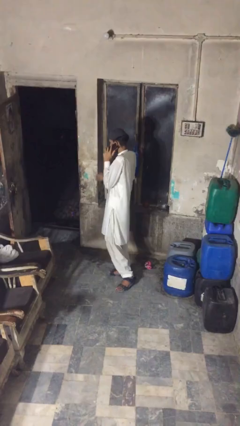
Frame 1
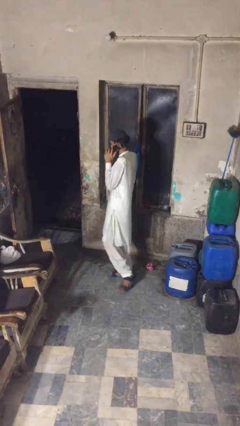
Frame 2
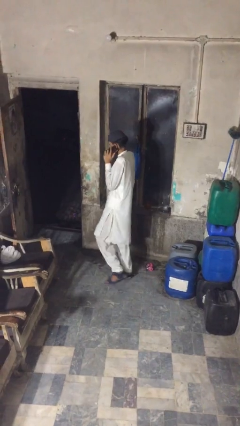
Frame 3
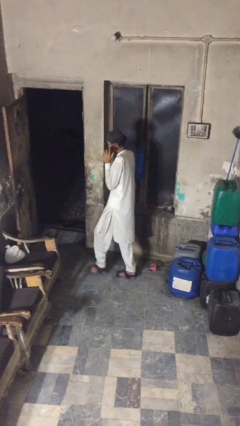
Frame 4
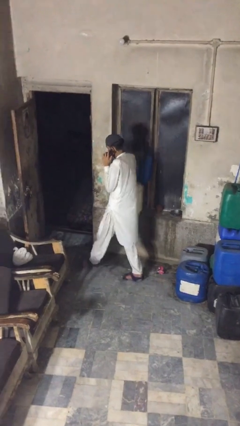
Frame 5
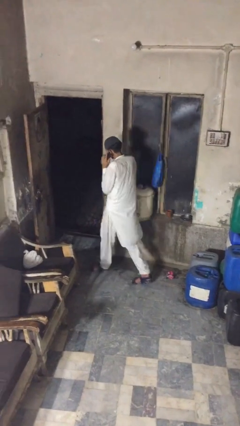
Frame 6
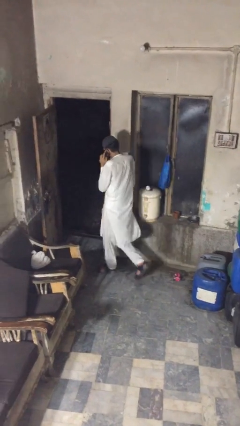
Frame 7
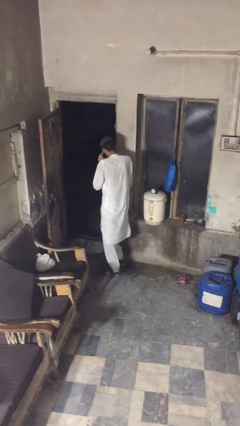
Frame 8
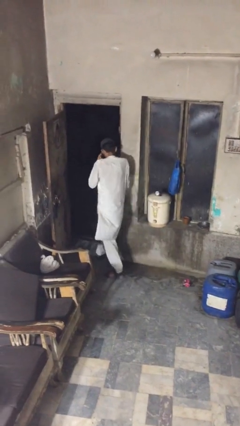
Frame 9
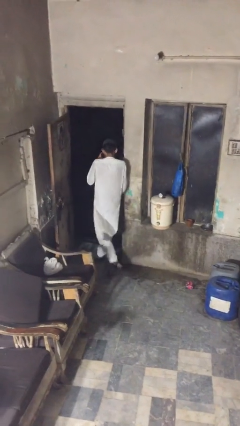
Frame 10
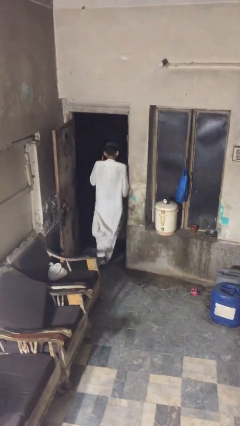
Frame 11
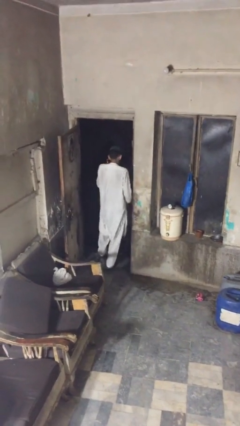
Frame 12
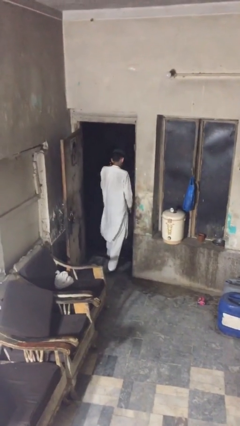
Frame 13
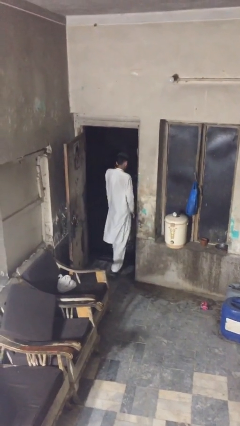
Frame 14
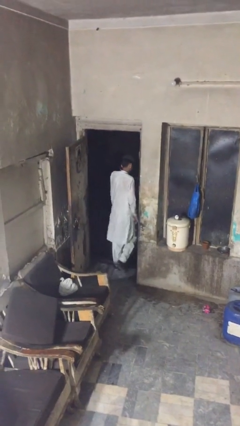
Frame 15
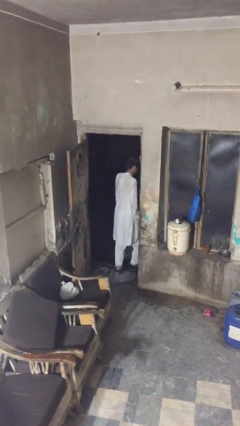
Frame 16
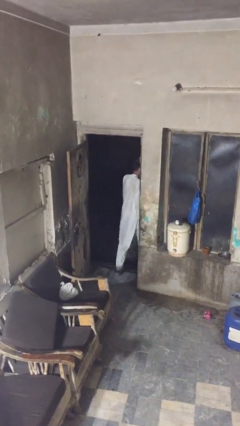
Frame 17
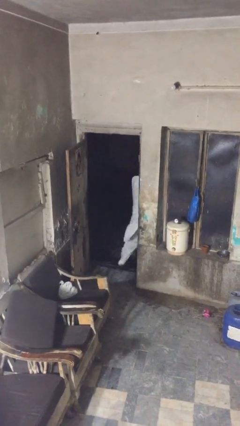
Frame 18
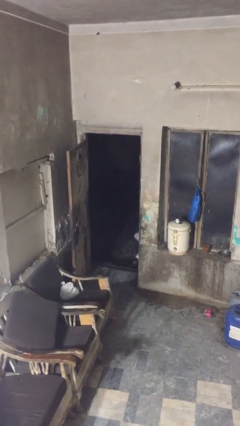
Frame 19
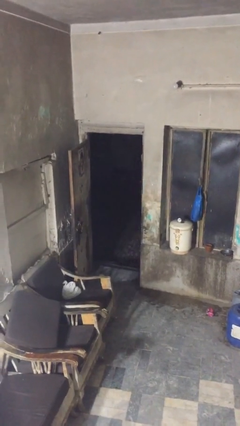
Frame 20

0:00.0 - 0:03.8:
person exits scene through structure

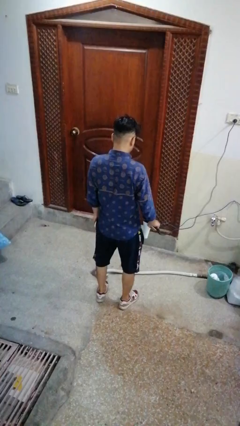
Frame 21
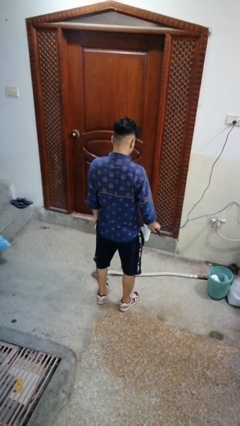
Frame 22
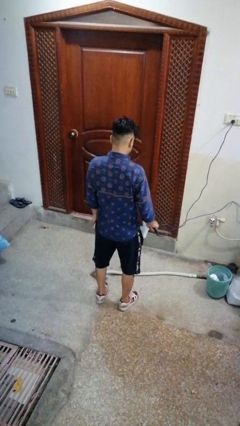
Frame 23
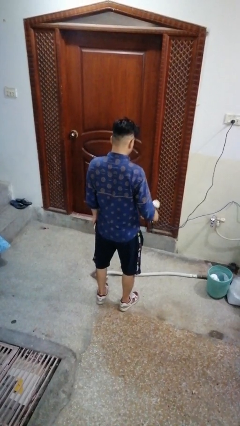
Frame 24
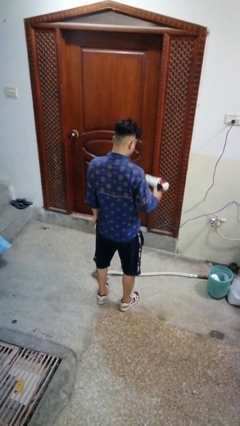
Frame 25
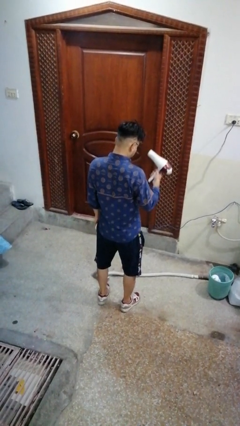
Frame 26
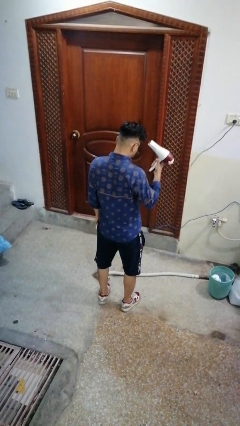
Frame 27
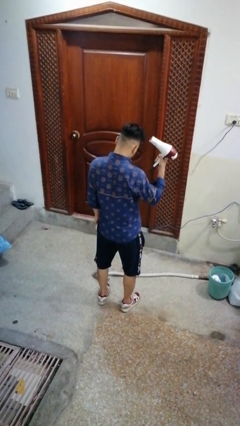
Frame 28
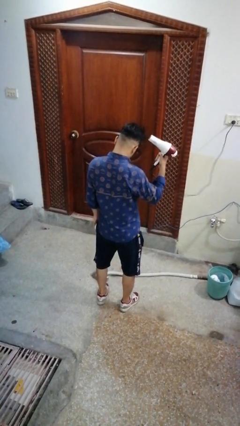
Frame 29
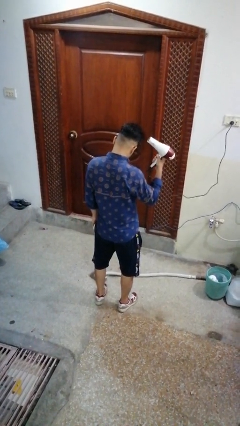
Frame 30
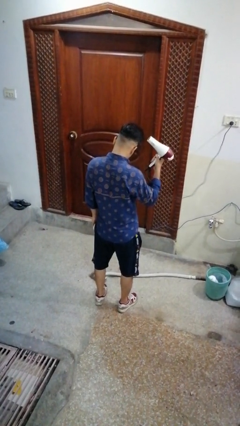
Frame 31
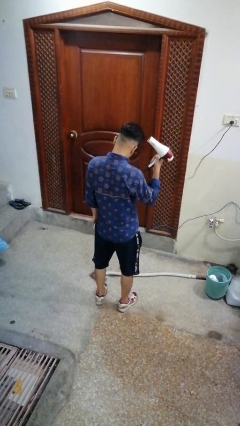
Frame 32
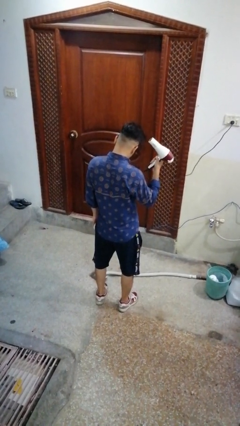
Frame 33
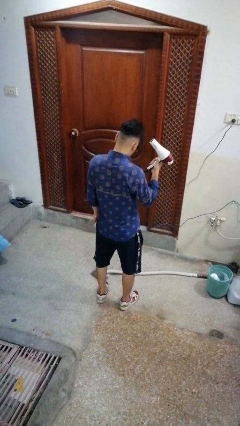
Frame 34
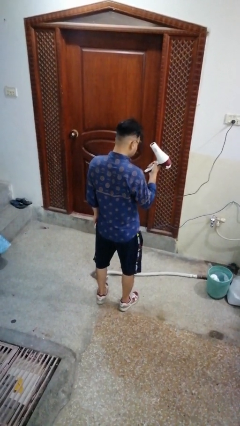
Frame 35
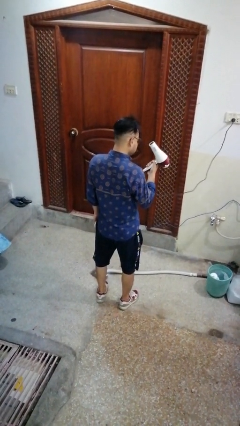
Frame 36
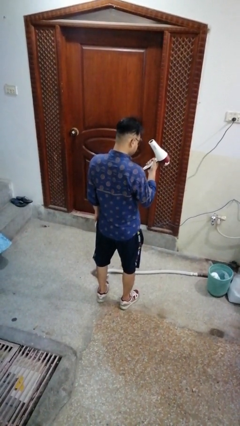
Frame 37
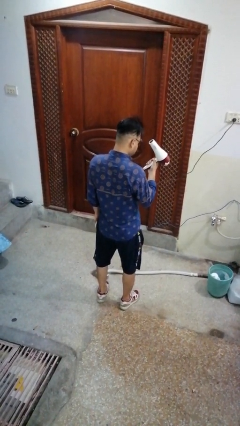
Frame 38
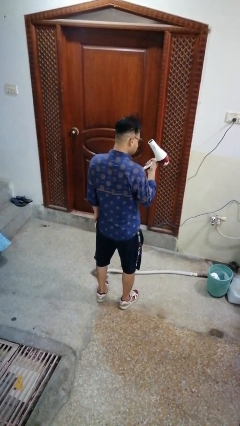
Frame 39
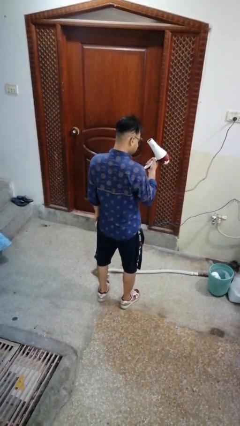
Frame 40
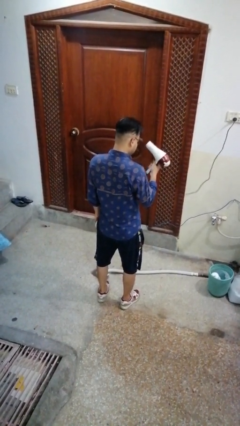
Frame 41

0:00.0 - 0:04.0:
person dries hair with hairdryer

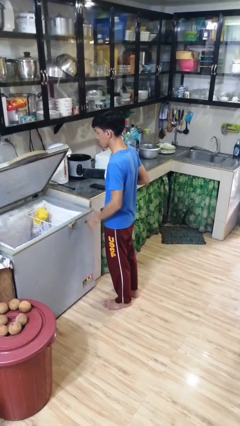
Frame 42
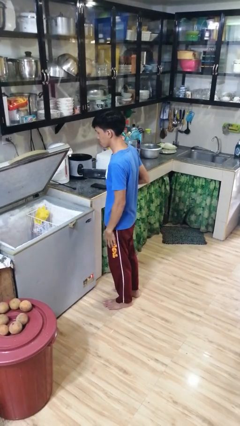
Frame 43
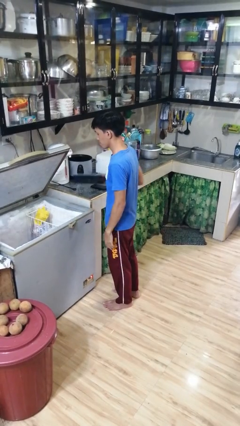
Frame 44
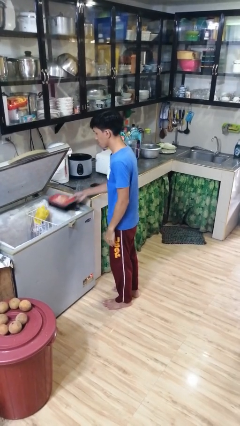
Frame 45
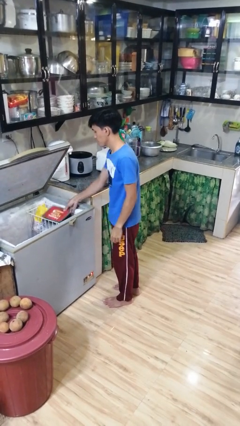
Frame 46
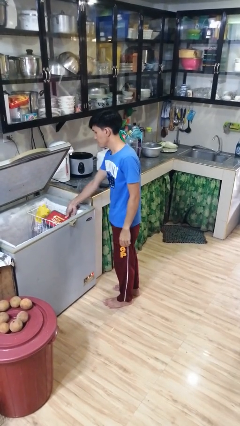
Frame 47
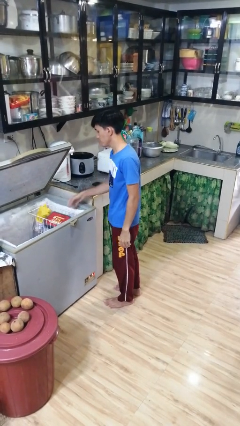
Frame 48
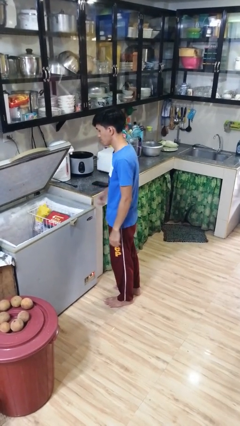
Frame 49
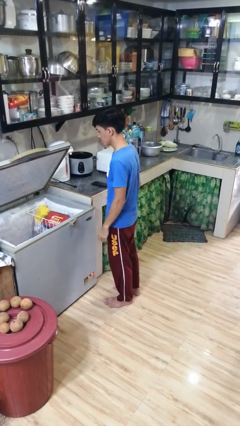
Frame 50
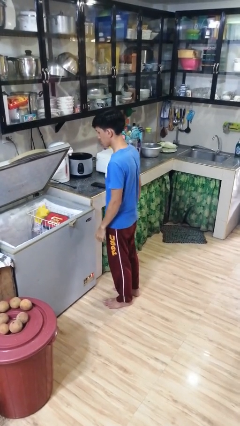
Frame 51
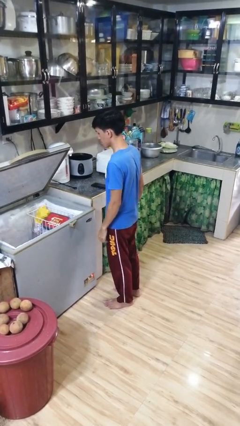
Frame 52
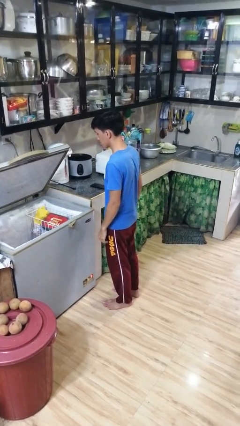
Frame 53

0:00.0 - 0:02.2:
person puts object into refrigerator

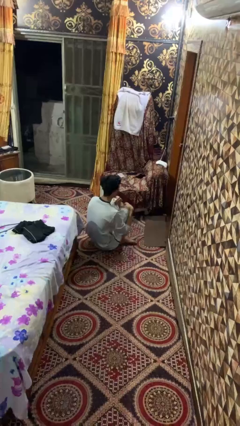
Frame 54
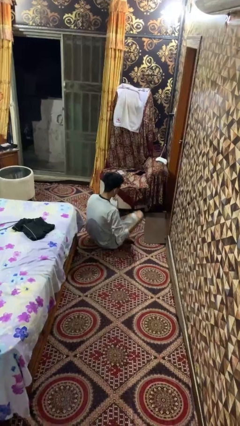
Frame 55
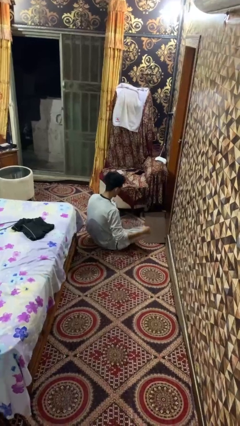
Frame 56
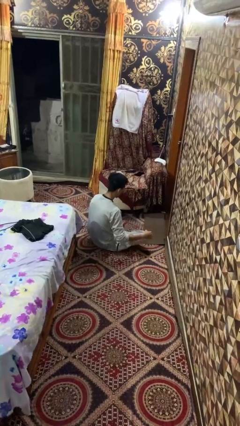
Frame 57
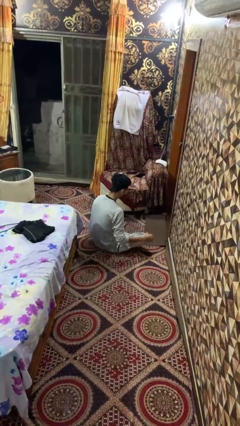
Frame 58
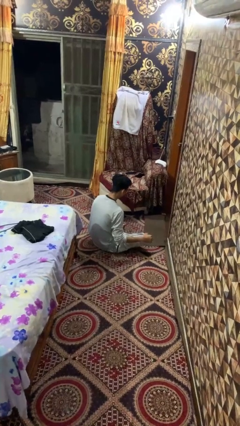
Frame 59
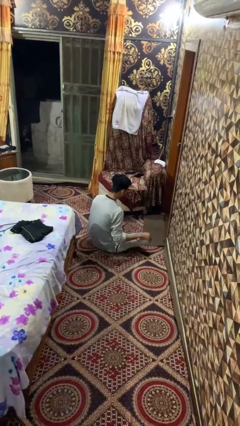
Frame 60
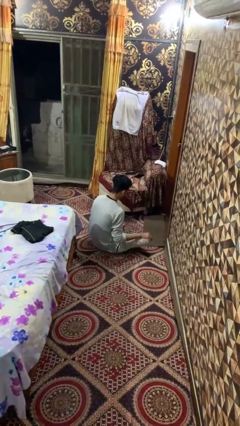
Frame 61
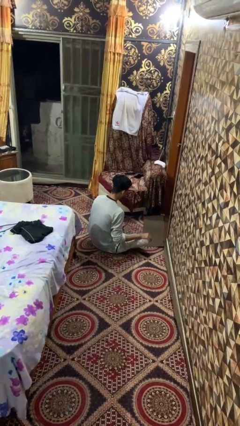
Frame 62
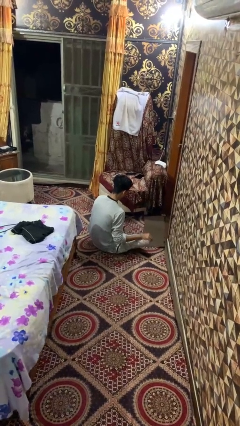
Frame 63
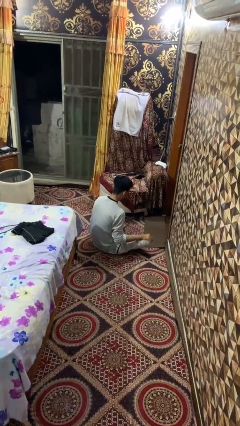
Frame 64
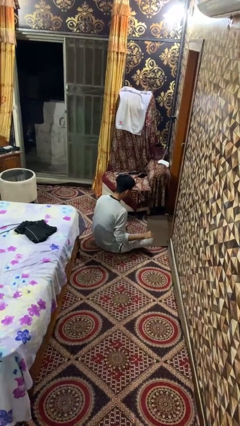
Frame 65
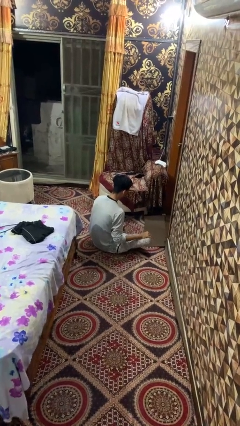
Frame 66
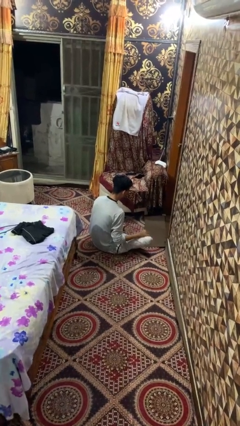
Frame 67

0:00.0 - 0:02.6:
person crosses legs

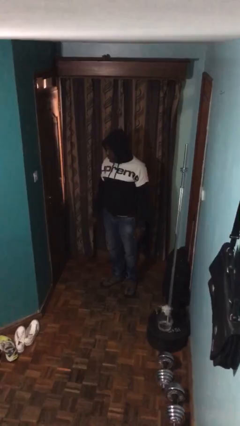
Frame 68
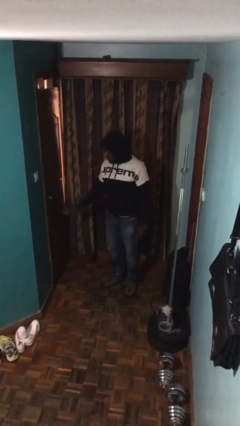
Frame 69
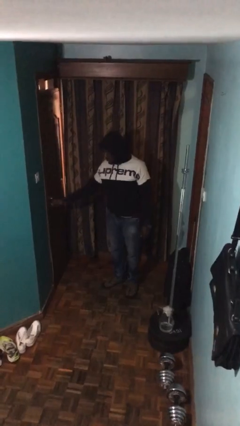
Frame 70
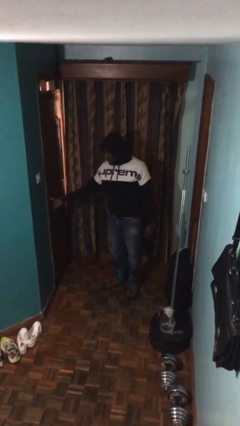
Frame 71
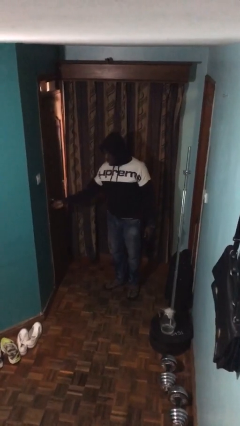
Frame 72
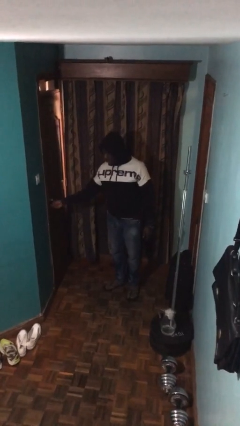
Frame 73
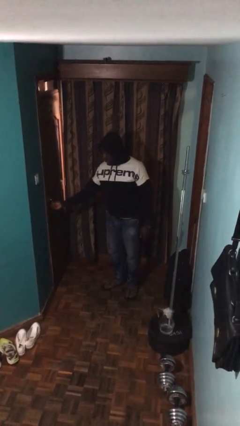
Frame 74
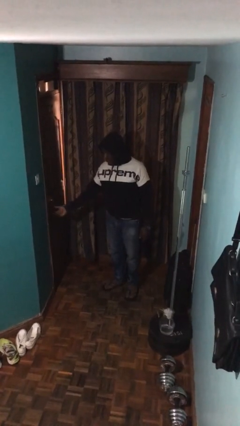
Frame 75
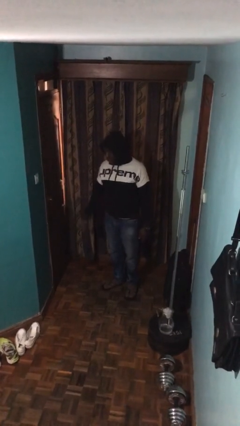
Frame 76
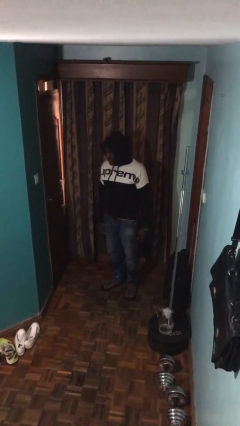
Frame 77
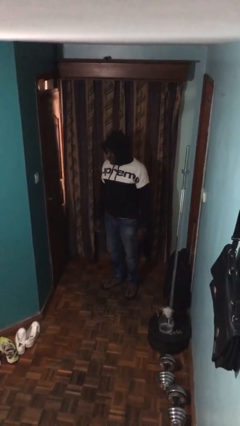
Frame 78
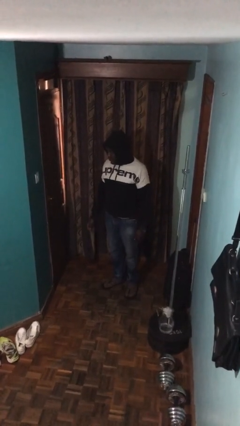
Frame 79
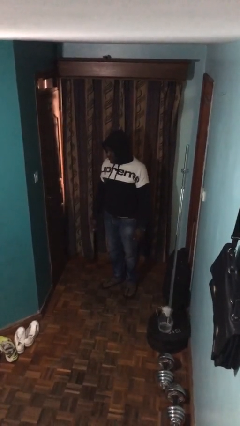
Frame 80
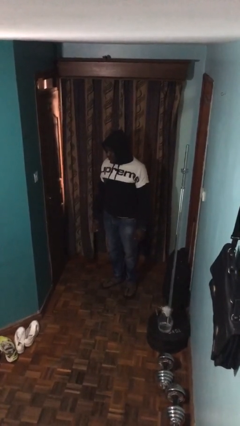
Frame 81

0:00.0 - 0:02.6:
person unlocks door with keys

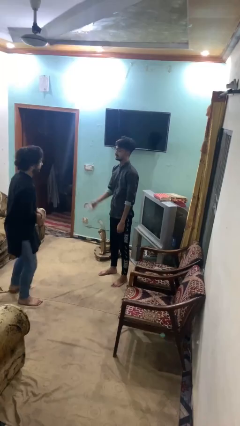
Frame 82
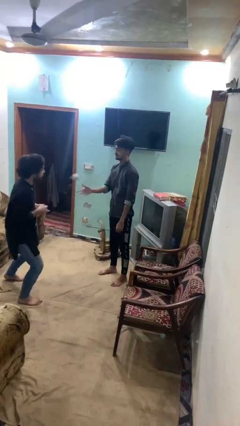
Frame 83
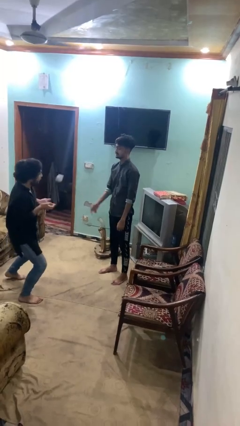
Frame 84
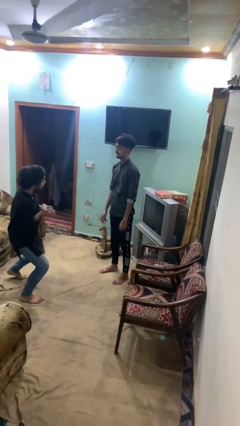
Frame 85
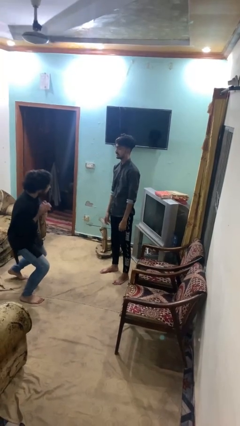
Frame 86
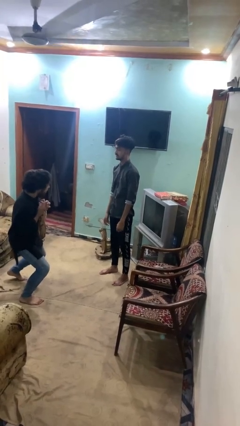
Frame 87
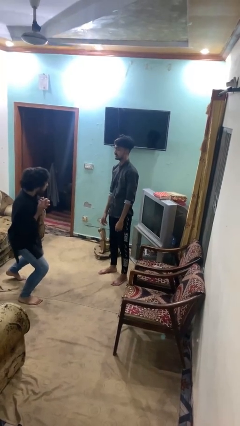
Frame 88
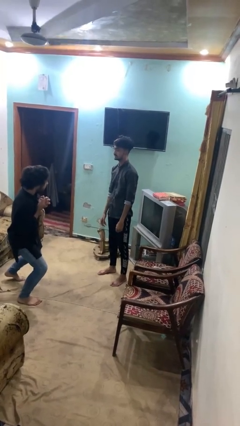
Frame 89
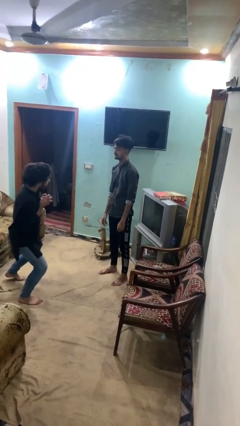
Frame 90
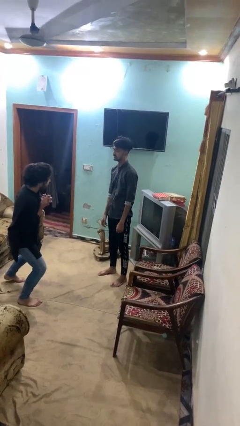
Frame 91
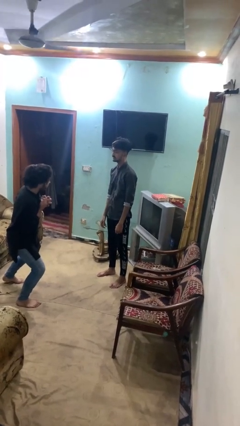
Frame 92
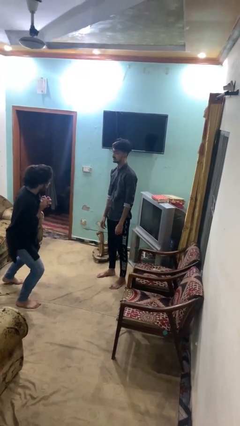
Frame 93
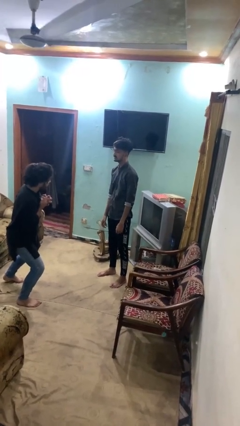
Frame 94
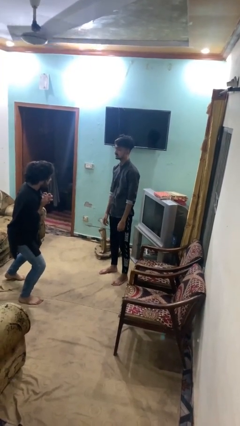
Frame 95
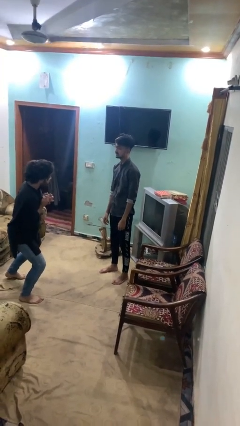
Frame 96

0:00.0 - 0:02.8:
person throws object to person
